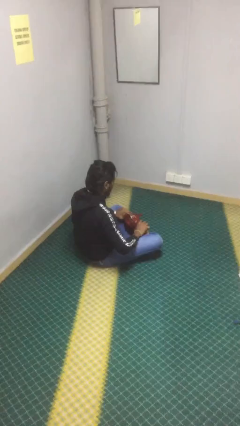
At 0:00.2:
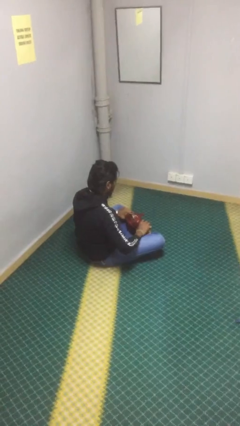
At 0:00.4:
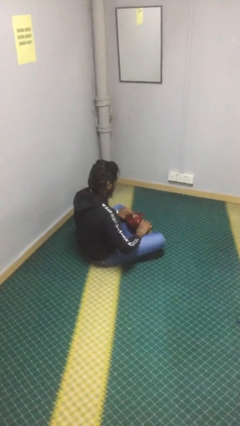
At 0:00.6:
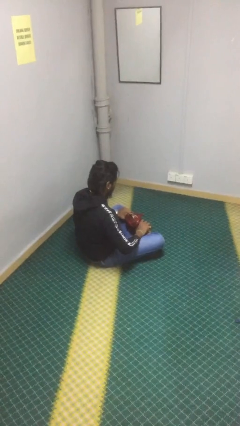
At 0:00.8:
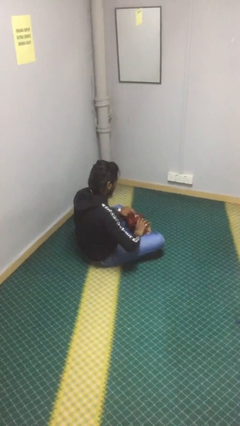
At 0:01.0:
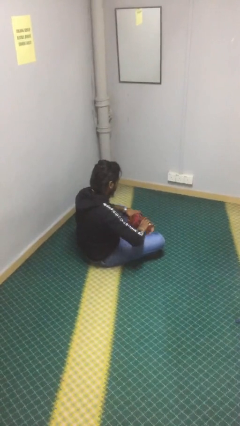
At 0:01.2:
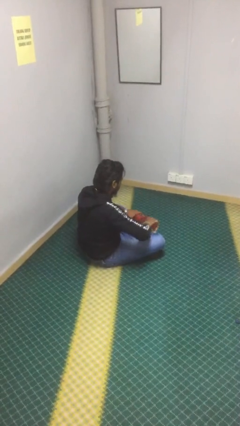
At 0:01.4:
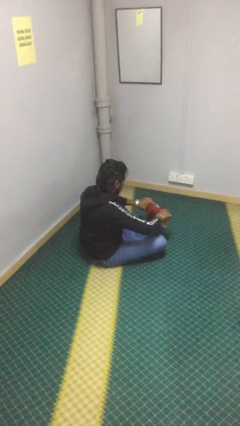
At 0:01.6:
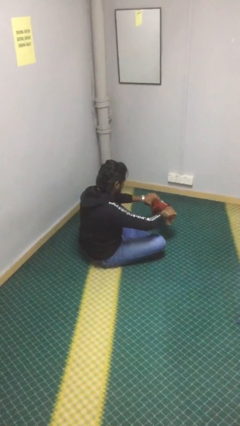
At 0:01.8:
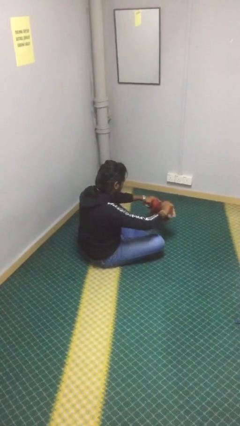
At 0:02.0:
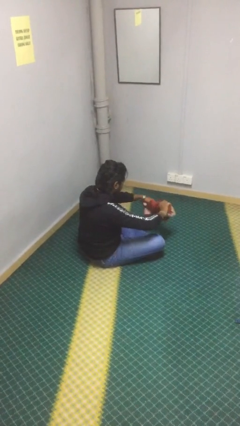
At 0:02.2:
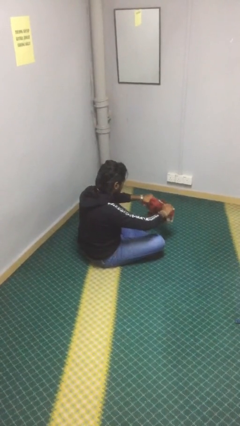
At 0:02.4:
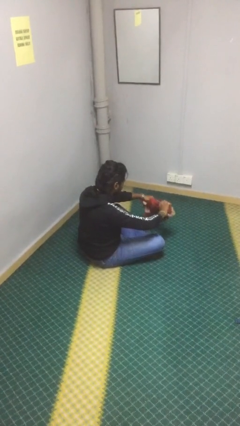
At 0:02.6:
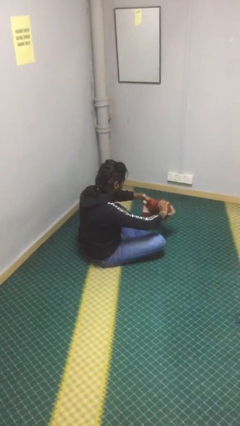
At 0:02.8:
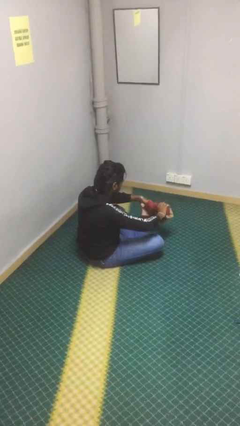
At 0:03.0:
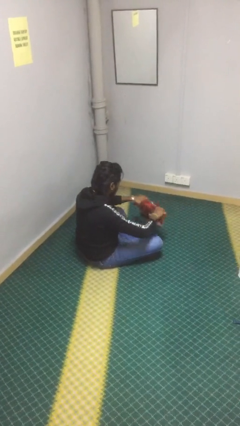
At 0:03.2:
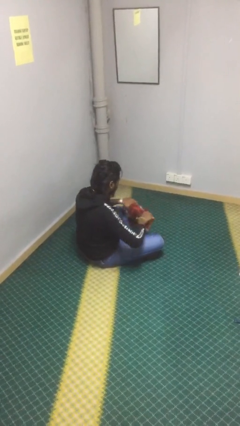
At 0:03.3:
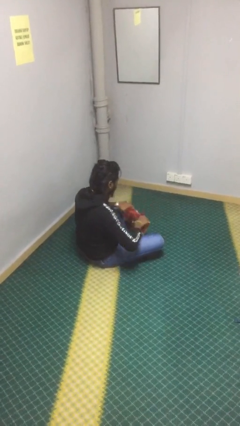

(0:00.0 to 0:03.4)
person squeezes object

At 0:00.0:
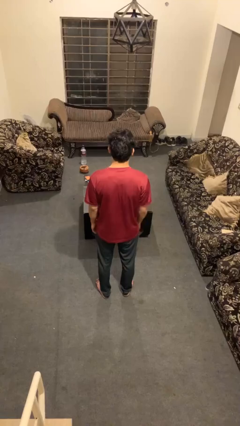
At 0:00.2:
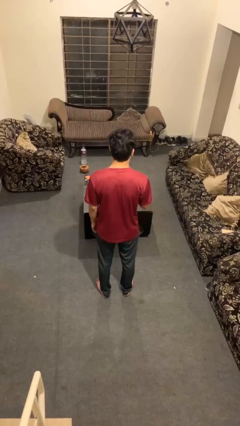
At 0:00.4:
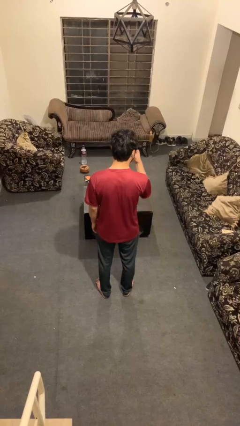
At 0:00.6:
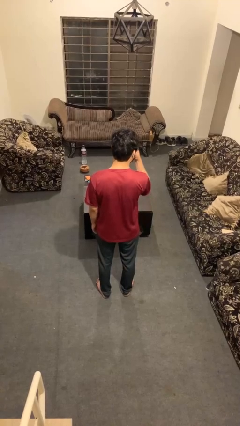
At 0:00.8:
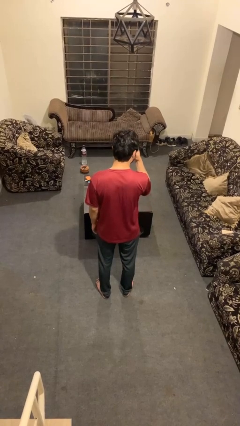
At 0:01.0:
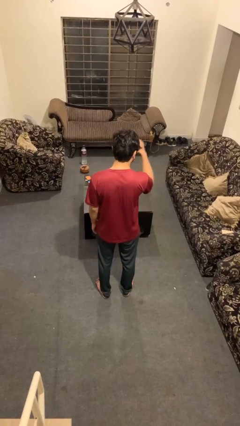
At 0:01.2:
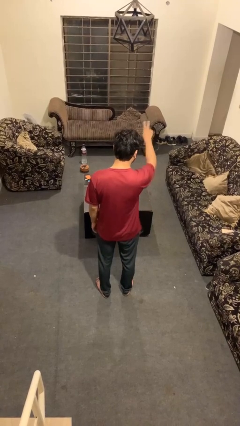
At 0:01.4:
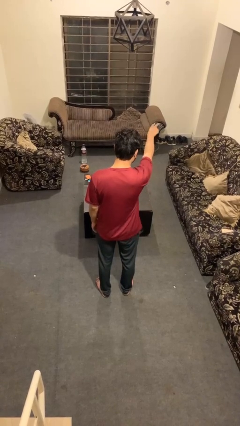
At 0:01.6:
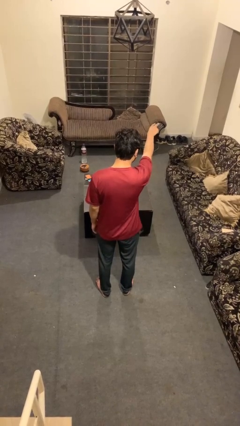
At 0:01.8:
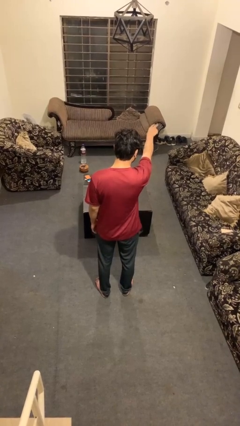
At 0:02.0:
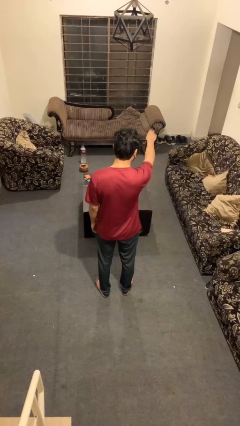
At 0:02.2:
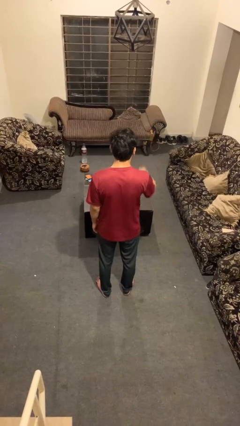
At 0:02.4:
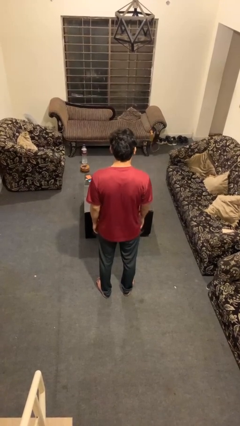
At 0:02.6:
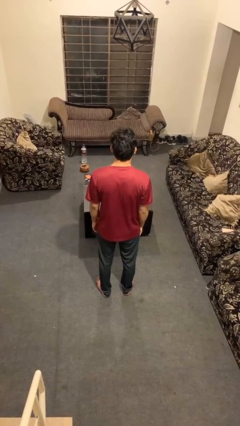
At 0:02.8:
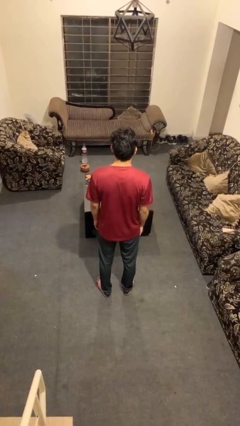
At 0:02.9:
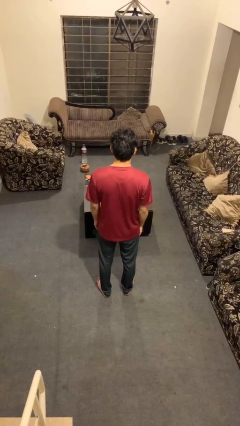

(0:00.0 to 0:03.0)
person gestures watch closely

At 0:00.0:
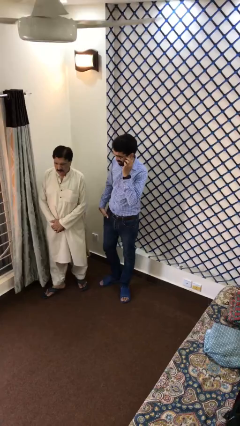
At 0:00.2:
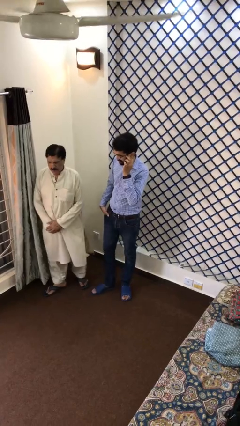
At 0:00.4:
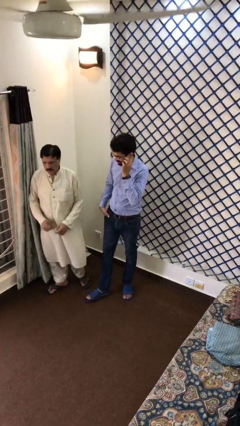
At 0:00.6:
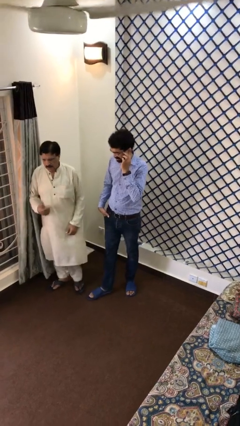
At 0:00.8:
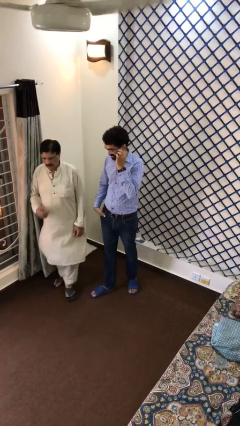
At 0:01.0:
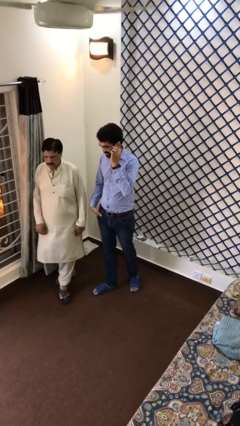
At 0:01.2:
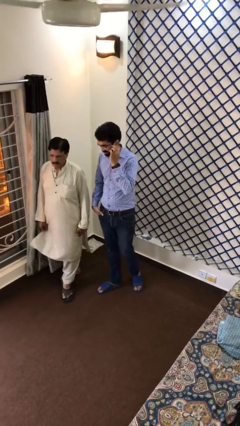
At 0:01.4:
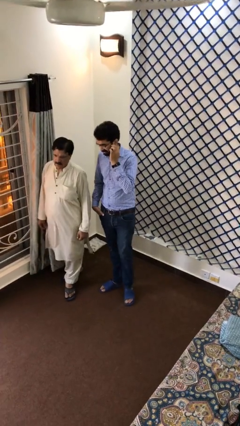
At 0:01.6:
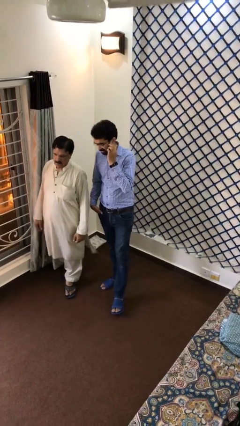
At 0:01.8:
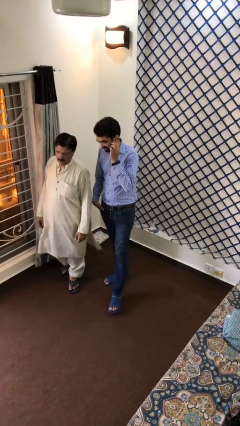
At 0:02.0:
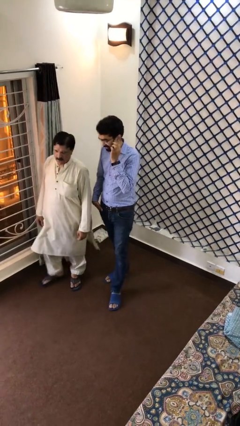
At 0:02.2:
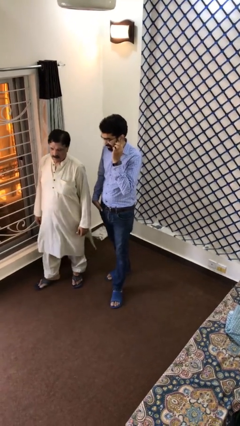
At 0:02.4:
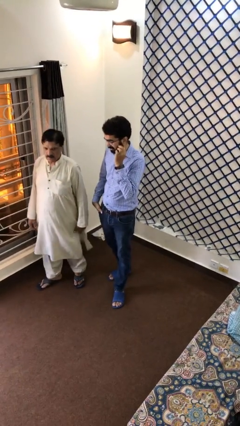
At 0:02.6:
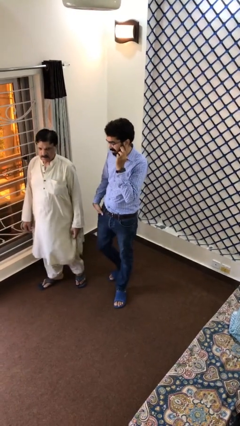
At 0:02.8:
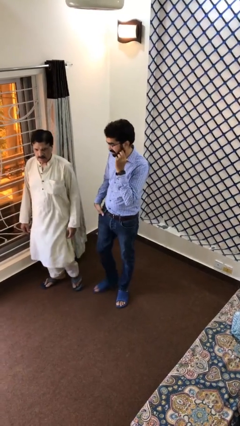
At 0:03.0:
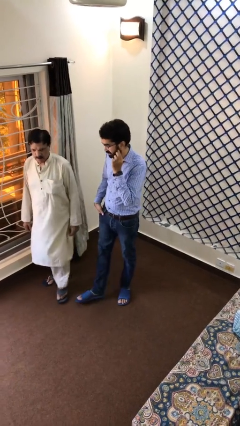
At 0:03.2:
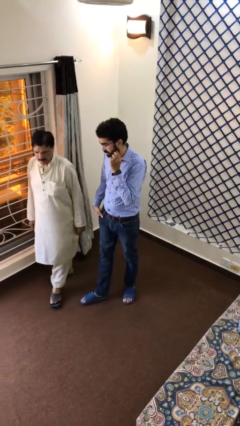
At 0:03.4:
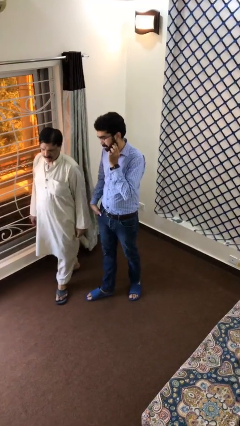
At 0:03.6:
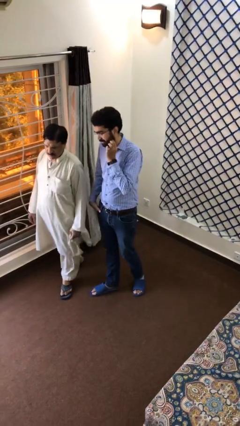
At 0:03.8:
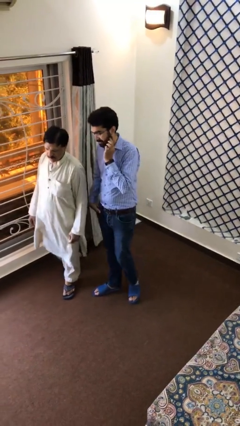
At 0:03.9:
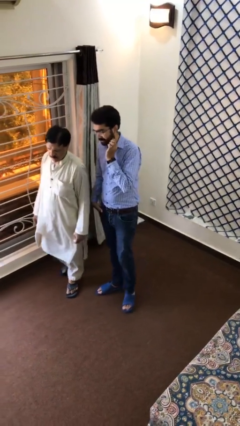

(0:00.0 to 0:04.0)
person talks to person

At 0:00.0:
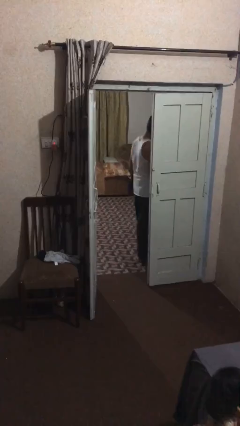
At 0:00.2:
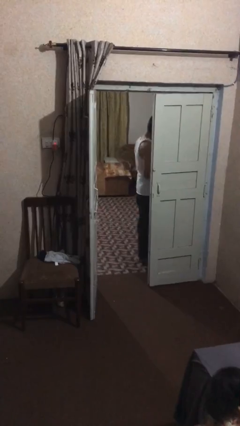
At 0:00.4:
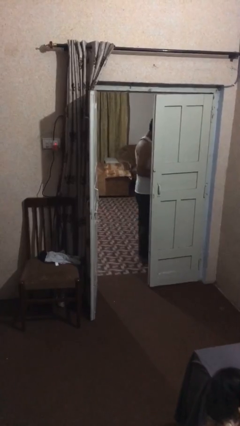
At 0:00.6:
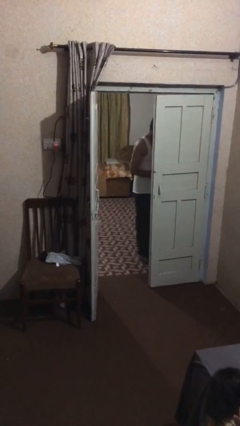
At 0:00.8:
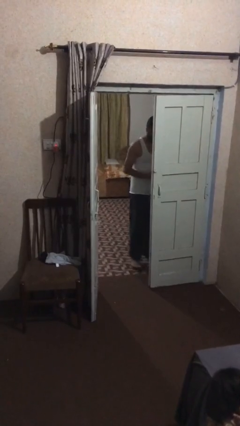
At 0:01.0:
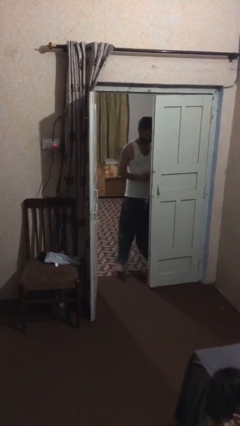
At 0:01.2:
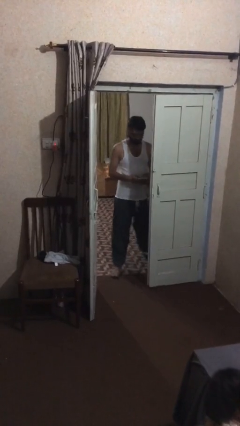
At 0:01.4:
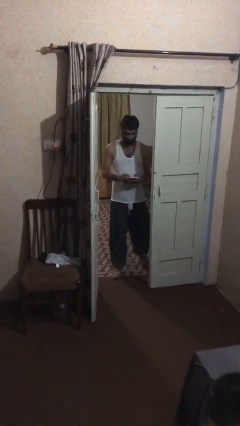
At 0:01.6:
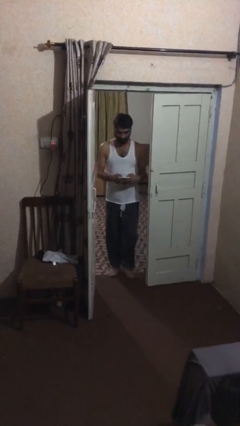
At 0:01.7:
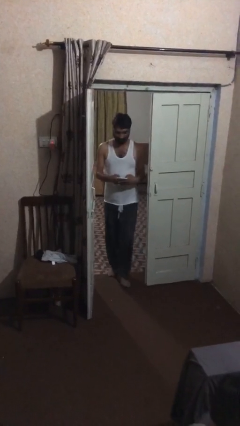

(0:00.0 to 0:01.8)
person enters scene through structure

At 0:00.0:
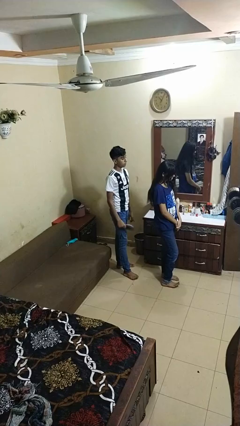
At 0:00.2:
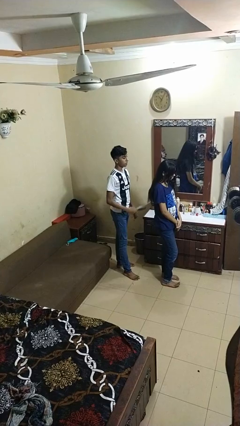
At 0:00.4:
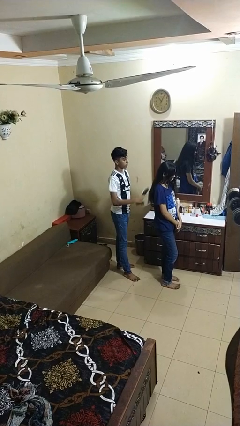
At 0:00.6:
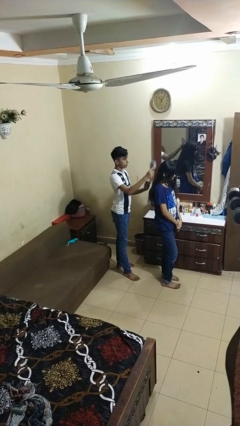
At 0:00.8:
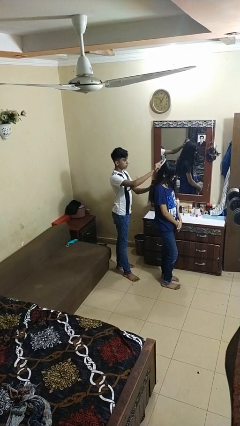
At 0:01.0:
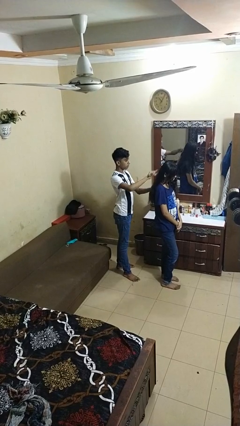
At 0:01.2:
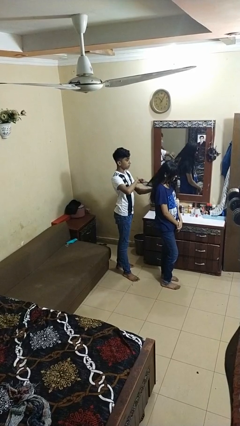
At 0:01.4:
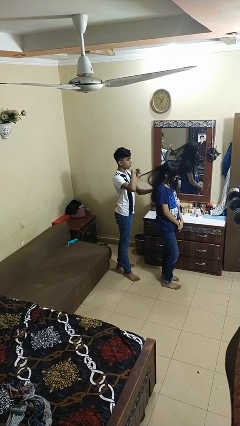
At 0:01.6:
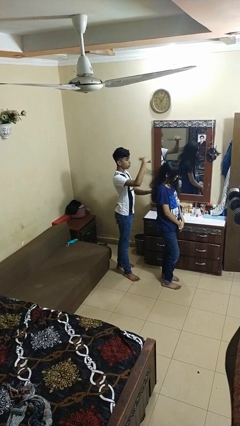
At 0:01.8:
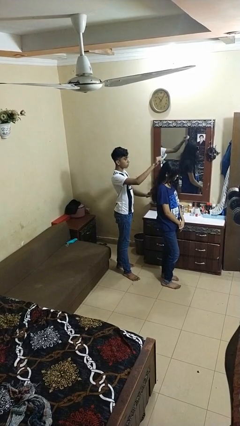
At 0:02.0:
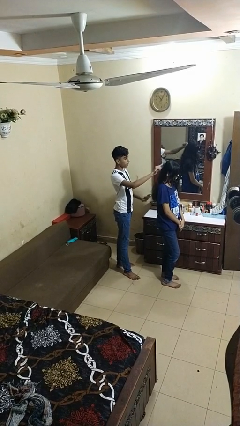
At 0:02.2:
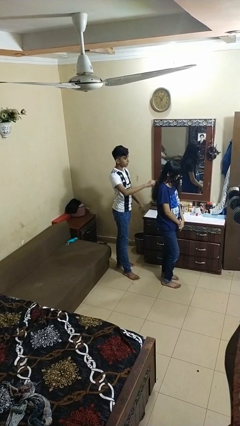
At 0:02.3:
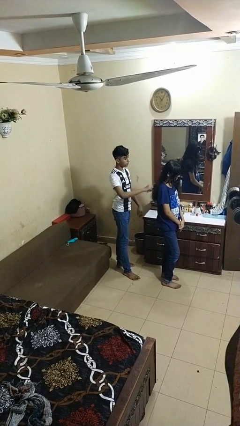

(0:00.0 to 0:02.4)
person brushes hair of person

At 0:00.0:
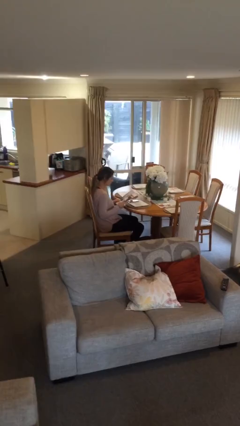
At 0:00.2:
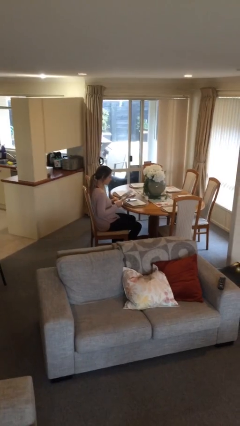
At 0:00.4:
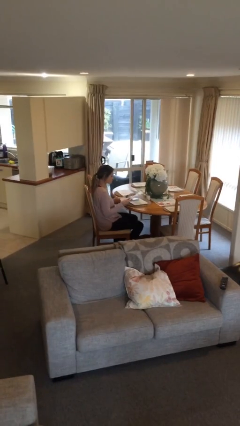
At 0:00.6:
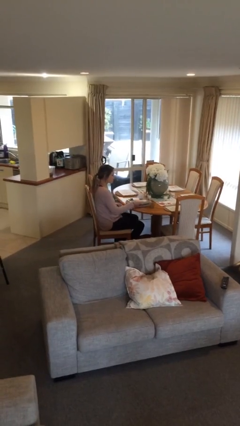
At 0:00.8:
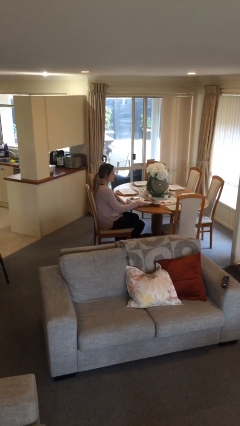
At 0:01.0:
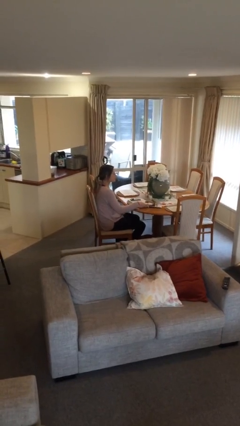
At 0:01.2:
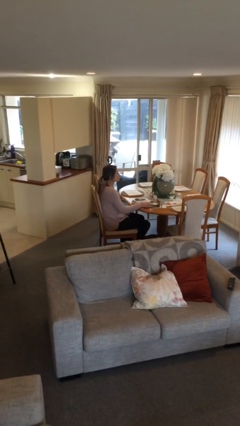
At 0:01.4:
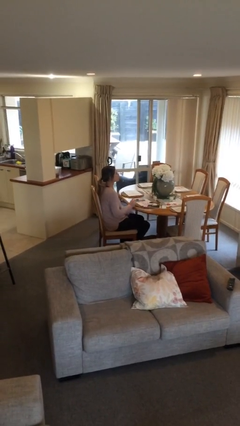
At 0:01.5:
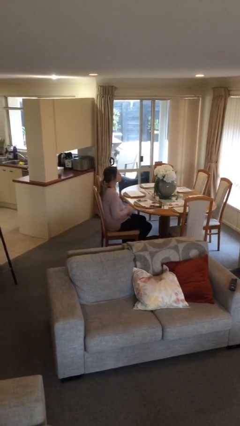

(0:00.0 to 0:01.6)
person puts down object on table

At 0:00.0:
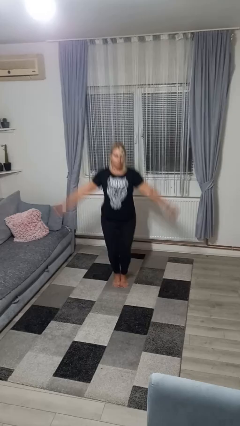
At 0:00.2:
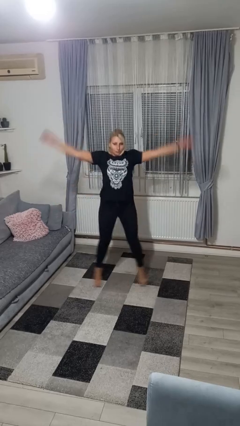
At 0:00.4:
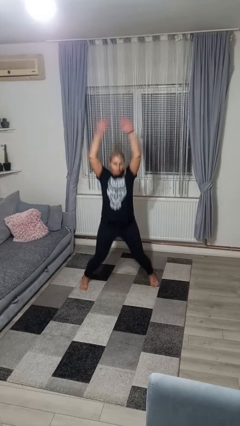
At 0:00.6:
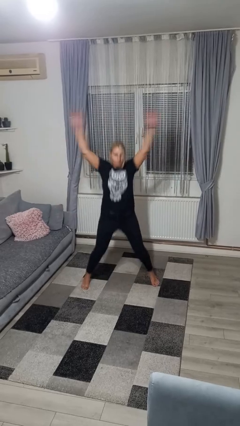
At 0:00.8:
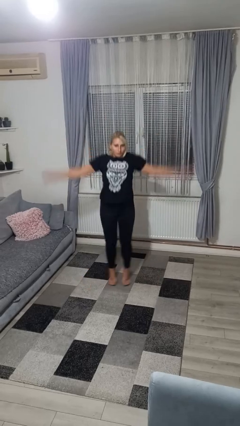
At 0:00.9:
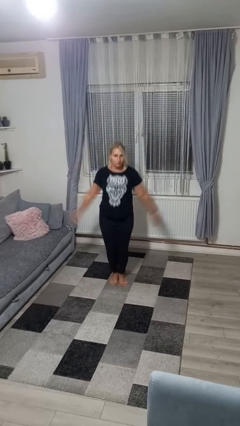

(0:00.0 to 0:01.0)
person exercises with jumping jacks
